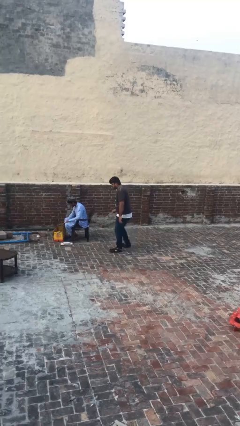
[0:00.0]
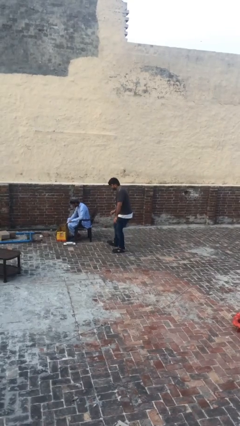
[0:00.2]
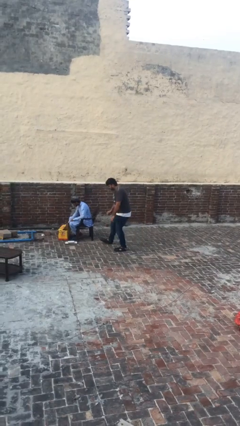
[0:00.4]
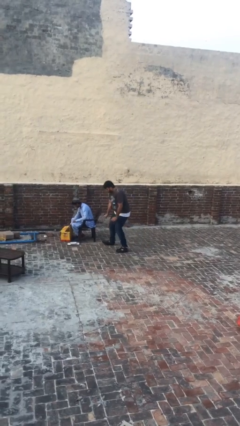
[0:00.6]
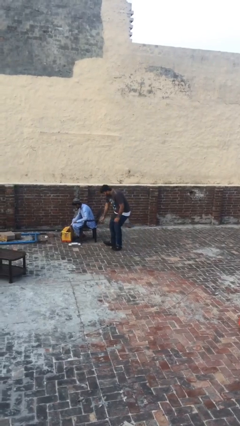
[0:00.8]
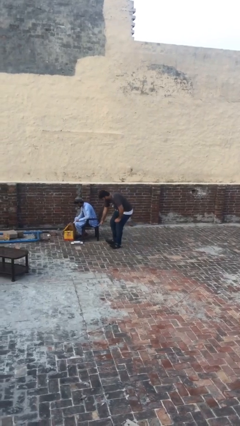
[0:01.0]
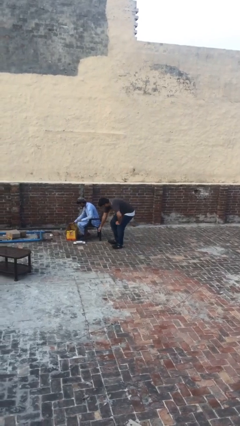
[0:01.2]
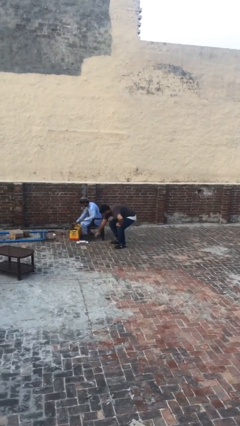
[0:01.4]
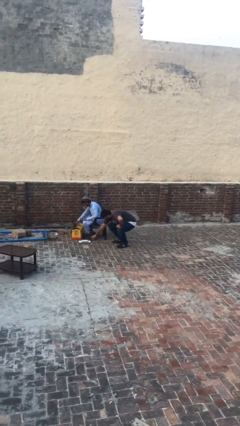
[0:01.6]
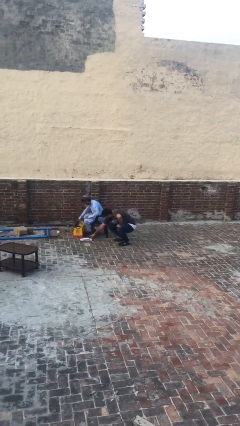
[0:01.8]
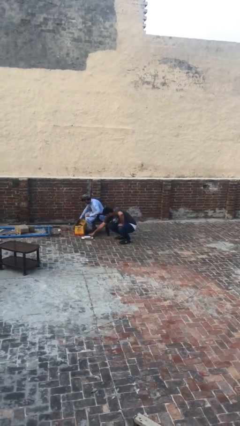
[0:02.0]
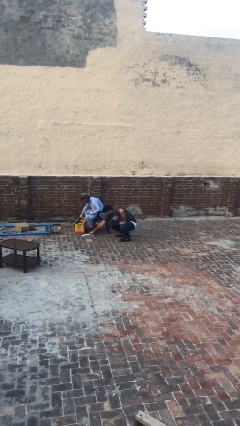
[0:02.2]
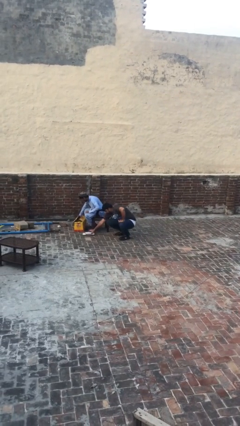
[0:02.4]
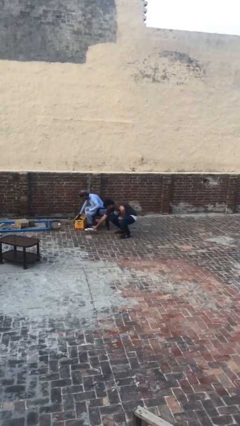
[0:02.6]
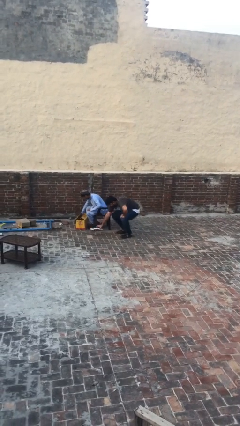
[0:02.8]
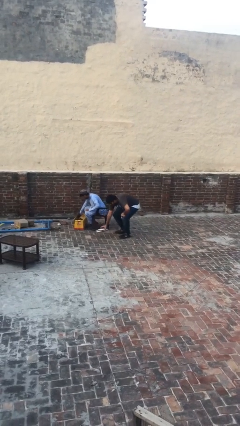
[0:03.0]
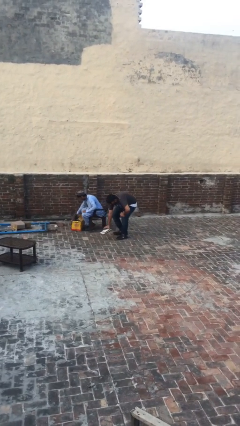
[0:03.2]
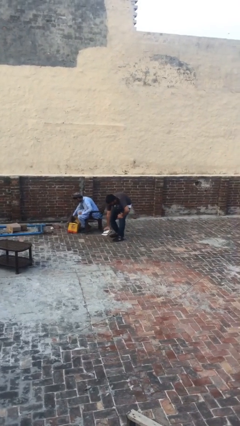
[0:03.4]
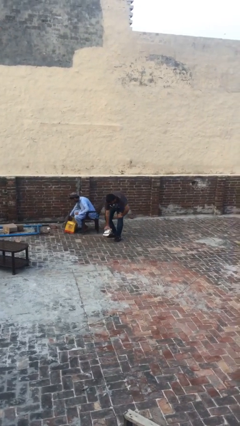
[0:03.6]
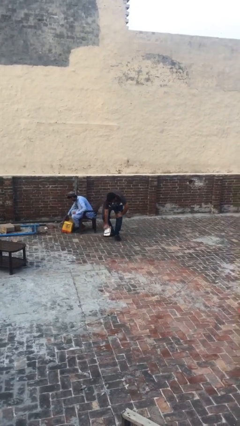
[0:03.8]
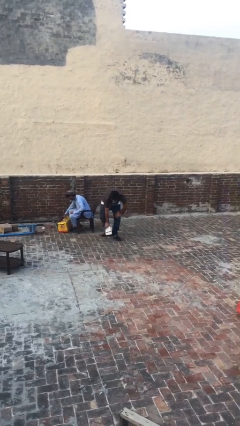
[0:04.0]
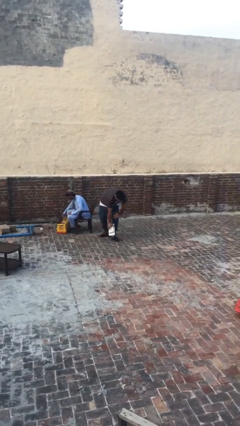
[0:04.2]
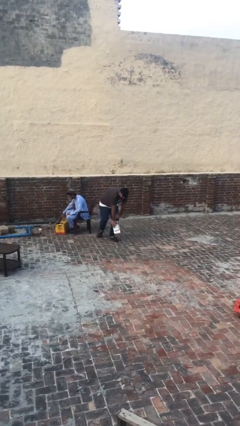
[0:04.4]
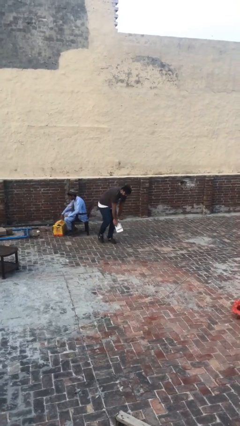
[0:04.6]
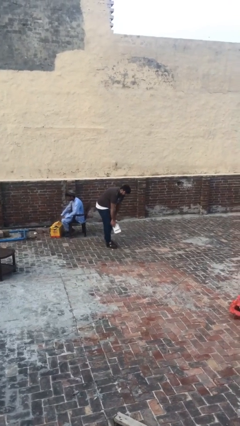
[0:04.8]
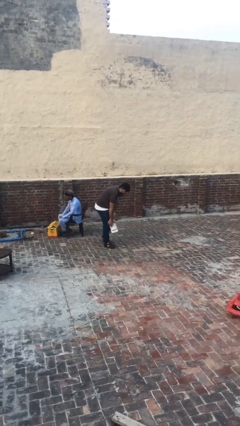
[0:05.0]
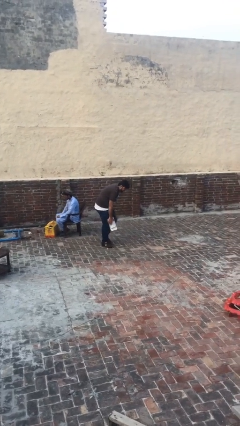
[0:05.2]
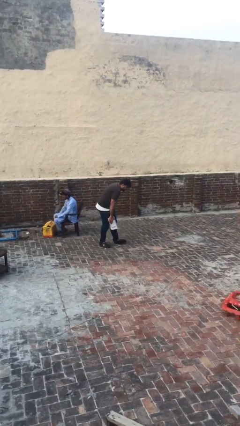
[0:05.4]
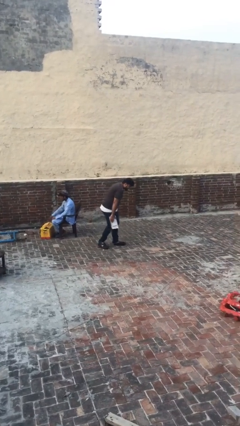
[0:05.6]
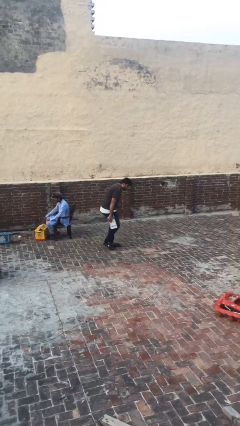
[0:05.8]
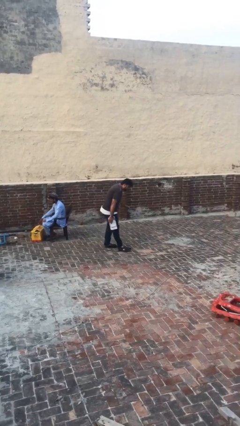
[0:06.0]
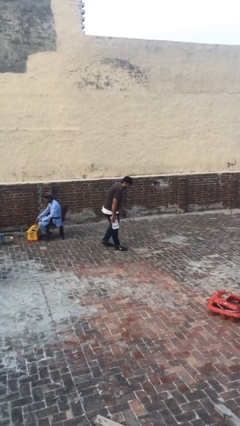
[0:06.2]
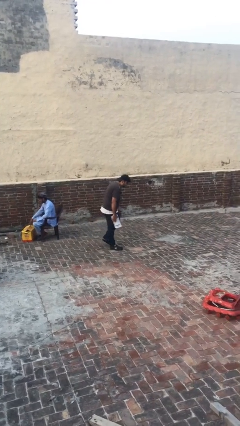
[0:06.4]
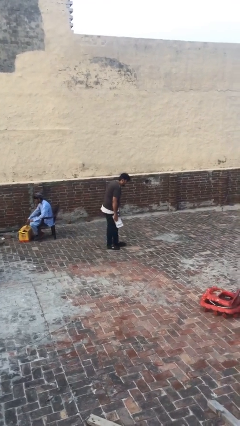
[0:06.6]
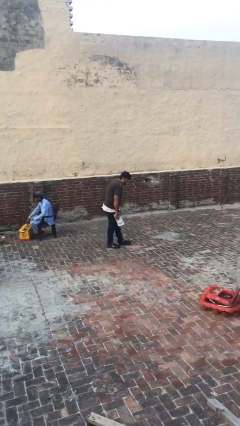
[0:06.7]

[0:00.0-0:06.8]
person steals object from person

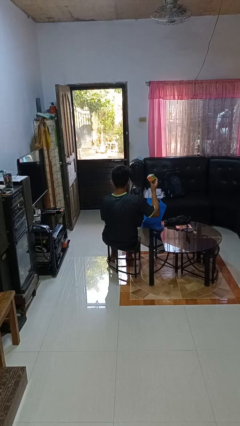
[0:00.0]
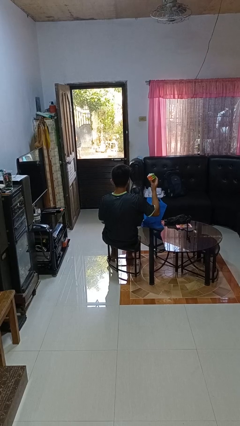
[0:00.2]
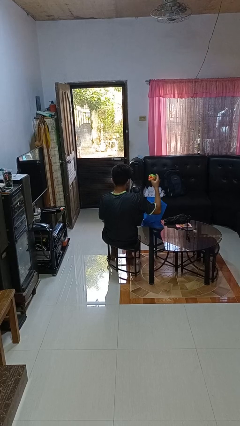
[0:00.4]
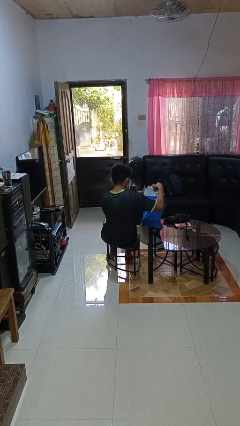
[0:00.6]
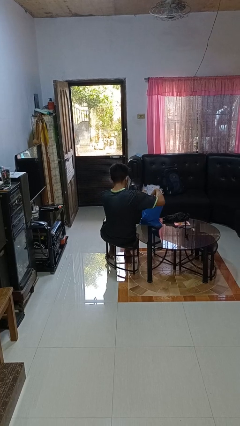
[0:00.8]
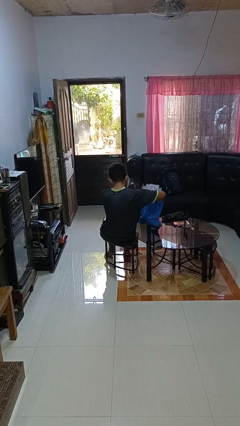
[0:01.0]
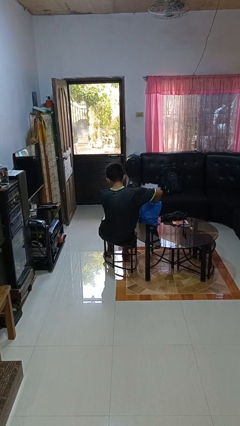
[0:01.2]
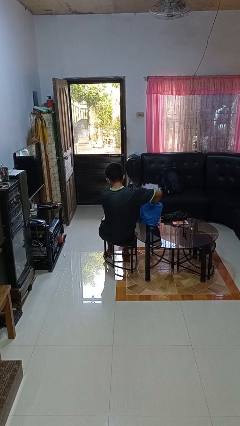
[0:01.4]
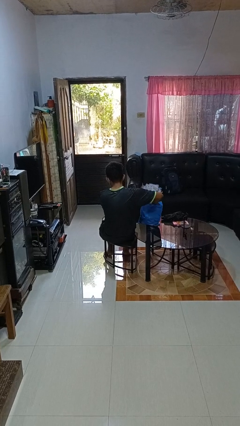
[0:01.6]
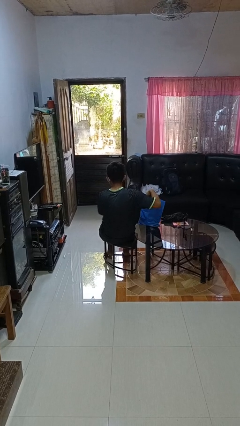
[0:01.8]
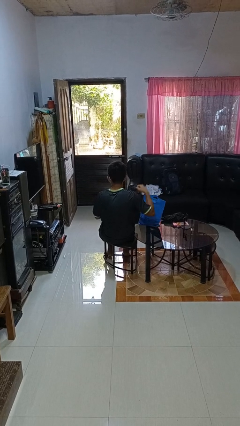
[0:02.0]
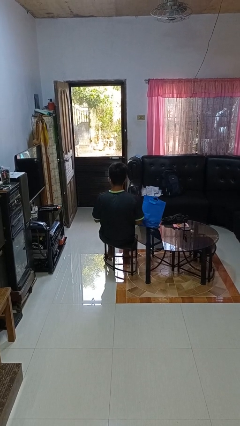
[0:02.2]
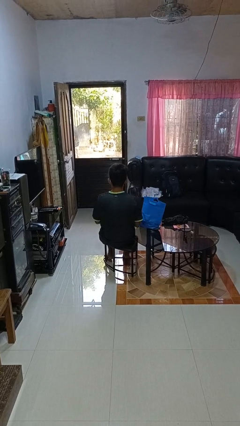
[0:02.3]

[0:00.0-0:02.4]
person puts object into bag

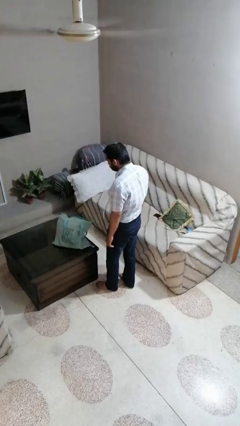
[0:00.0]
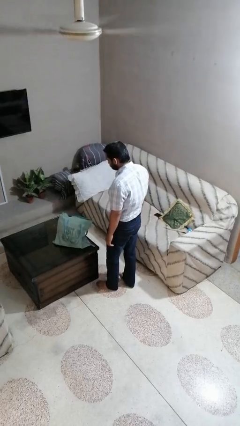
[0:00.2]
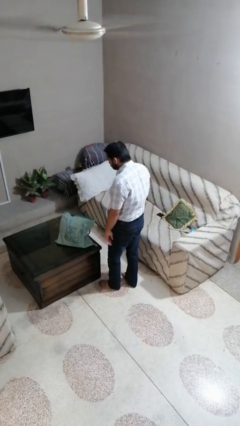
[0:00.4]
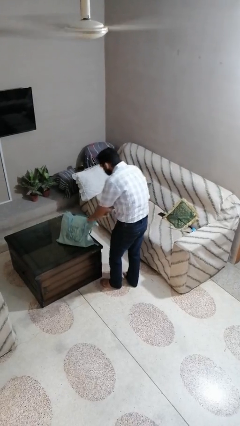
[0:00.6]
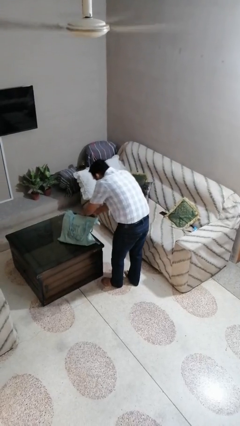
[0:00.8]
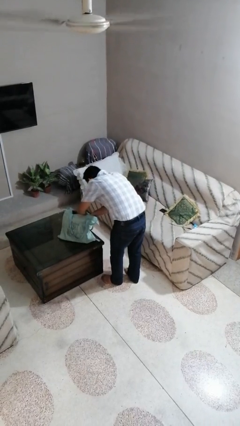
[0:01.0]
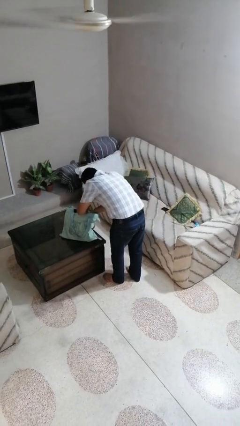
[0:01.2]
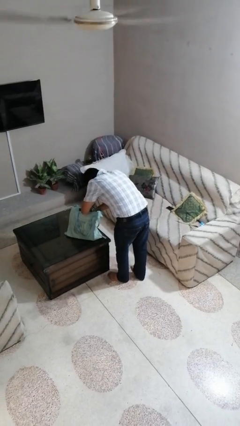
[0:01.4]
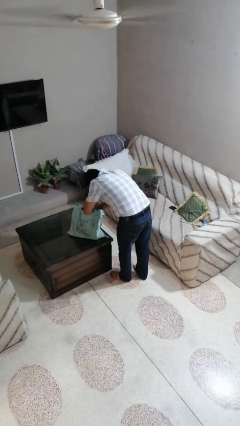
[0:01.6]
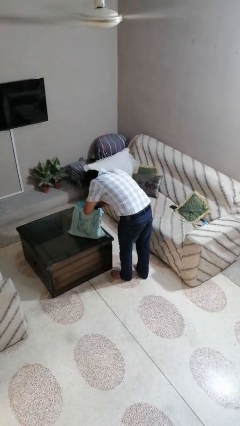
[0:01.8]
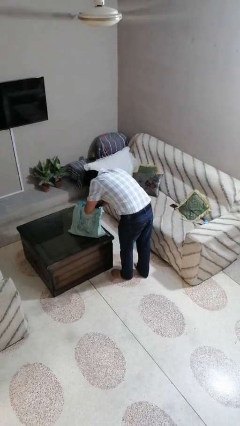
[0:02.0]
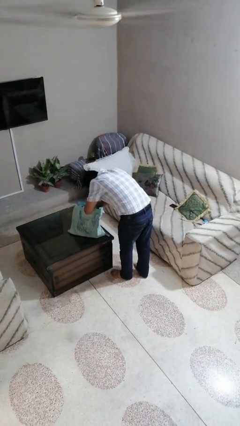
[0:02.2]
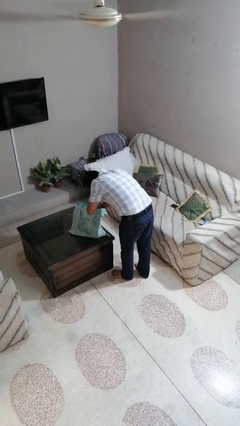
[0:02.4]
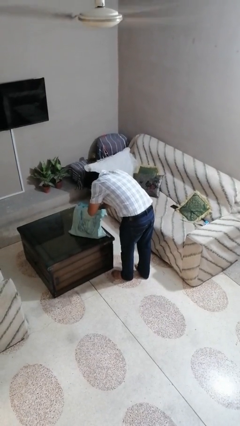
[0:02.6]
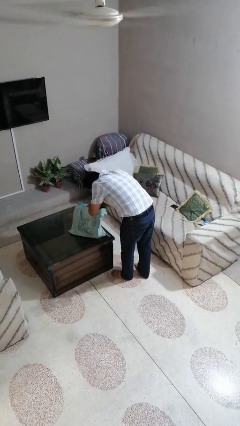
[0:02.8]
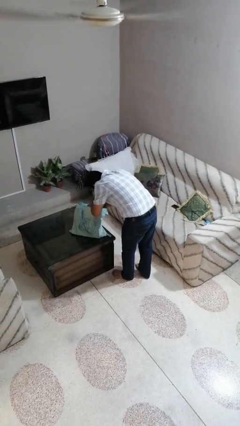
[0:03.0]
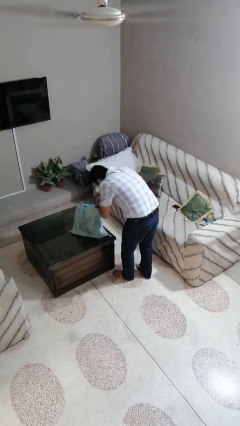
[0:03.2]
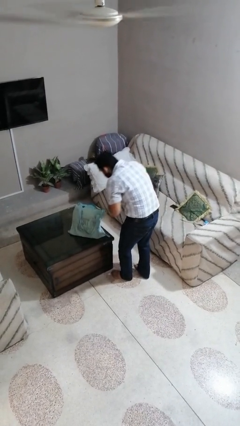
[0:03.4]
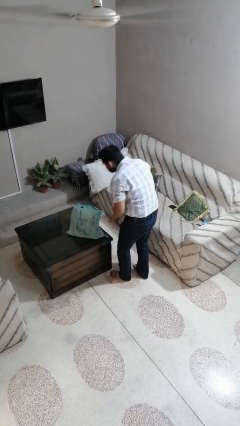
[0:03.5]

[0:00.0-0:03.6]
person searches in bag

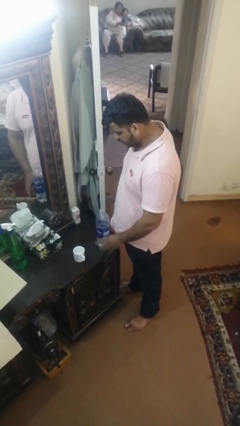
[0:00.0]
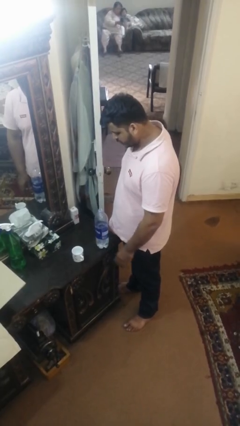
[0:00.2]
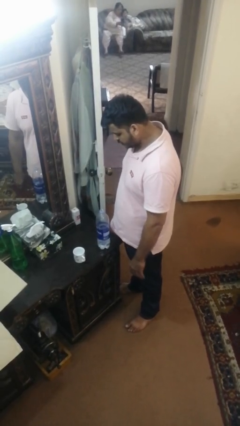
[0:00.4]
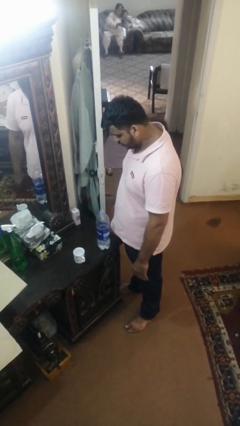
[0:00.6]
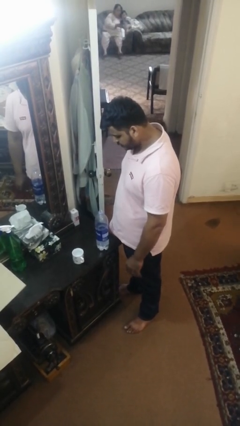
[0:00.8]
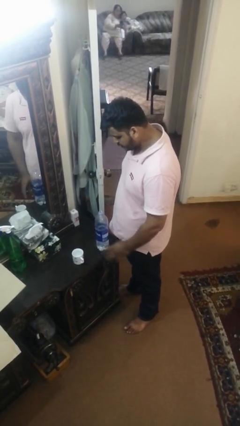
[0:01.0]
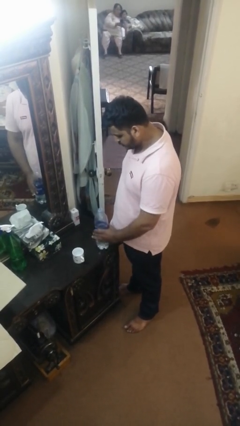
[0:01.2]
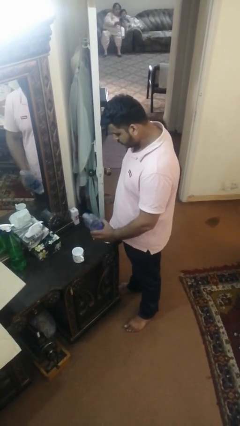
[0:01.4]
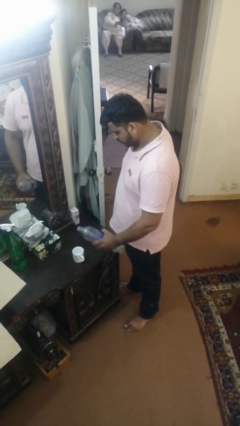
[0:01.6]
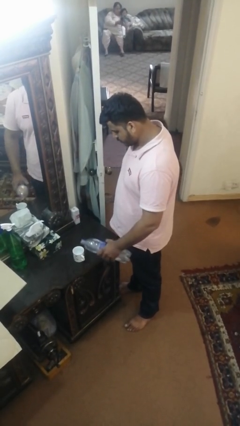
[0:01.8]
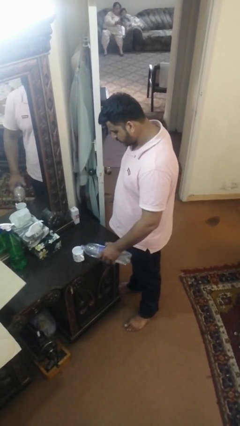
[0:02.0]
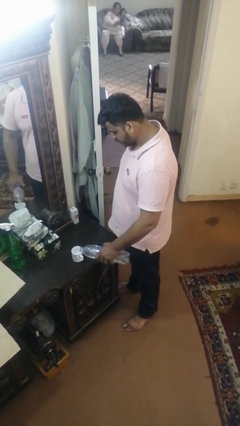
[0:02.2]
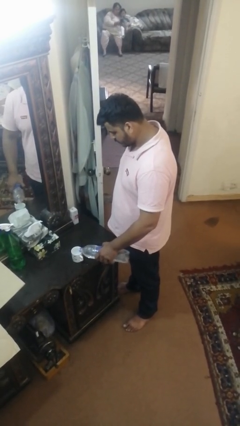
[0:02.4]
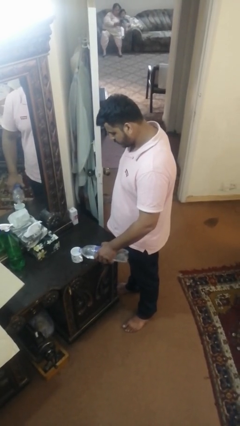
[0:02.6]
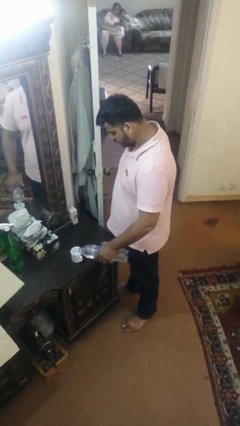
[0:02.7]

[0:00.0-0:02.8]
person pours liquid into cup

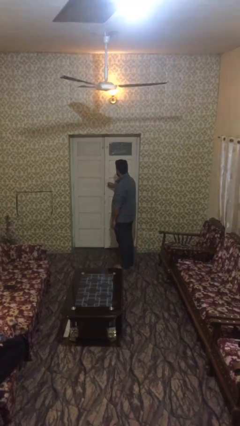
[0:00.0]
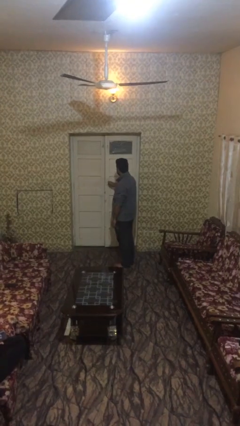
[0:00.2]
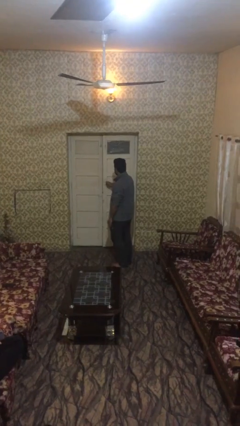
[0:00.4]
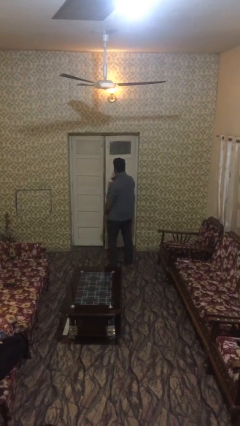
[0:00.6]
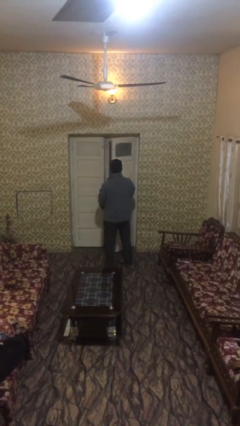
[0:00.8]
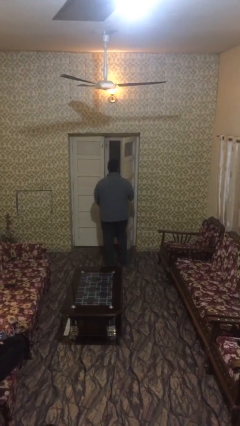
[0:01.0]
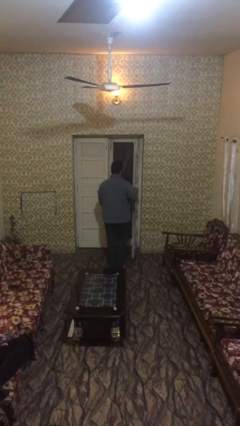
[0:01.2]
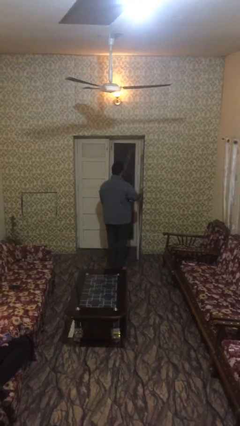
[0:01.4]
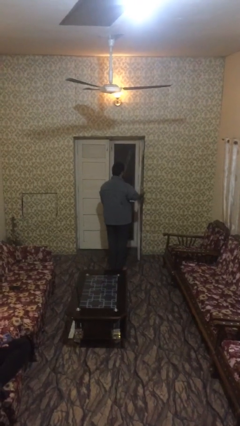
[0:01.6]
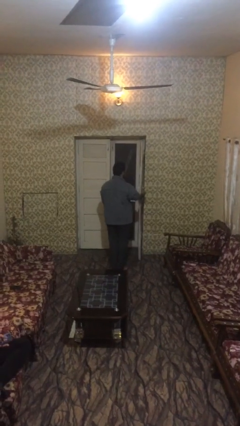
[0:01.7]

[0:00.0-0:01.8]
person opens facility door

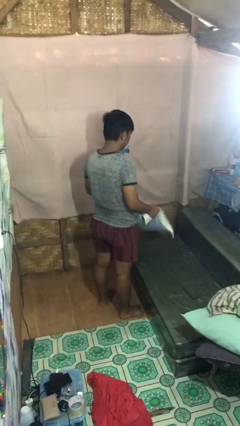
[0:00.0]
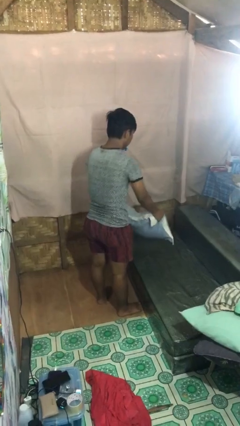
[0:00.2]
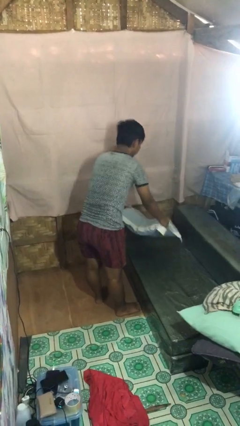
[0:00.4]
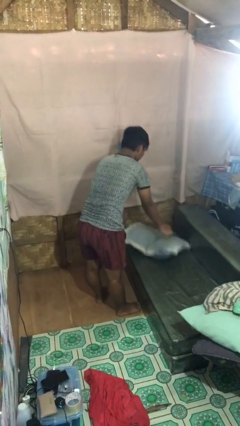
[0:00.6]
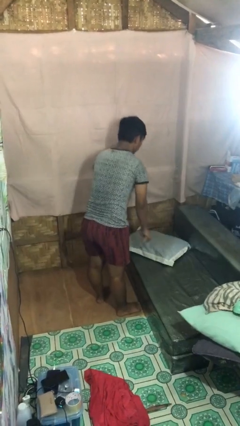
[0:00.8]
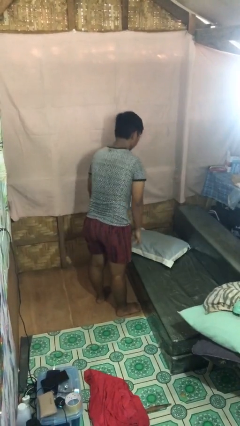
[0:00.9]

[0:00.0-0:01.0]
person puts down object on couch
